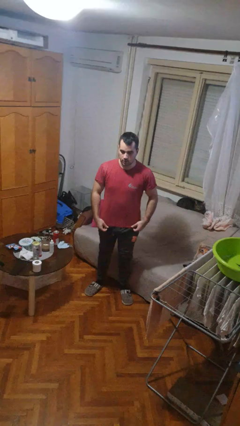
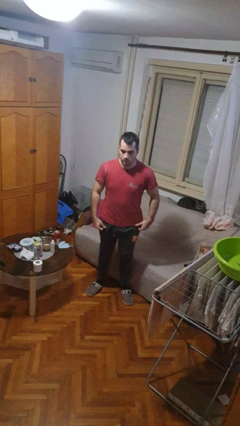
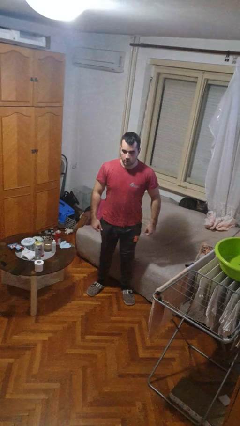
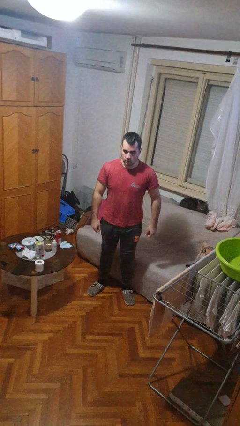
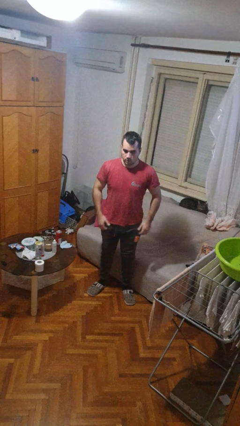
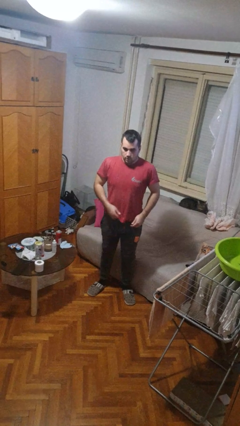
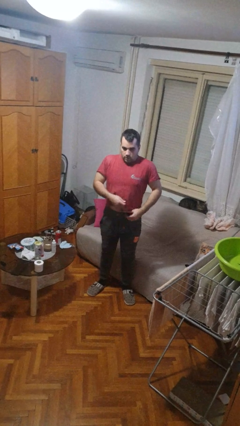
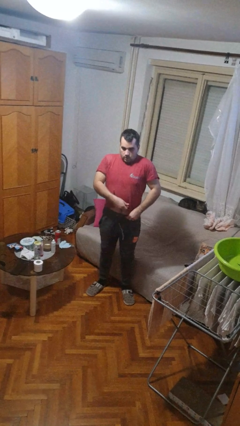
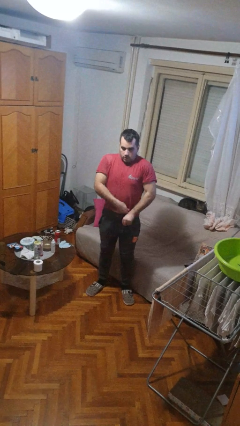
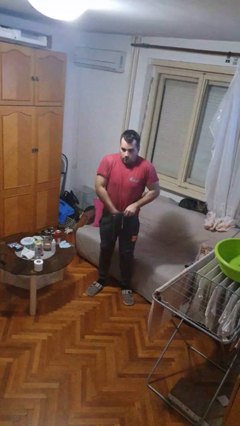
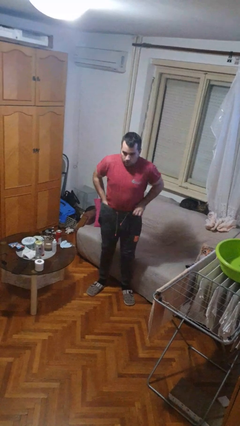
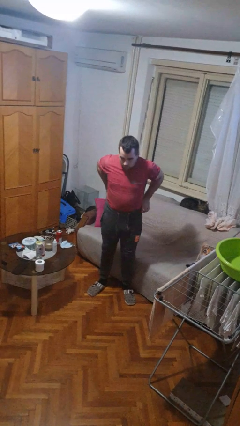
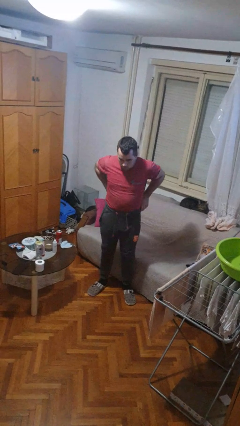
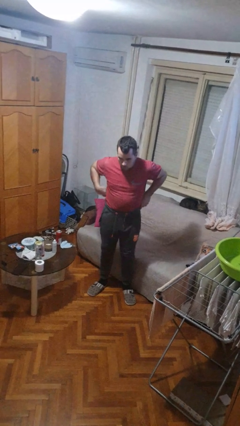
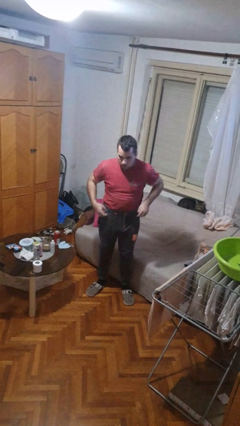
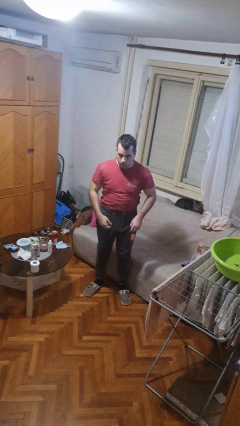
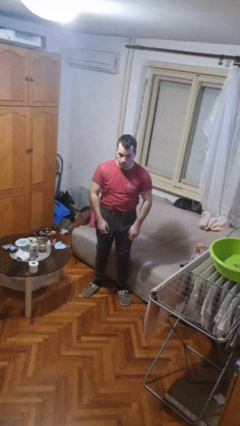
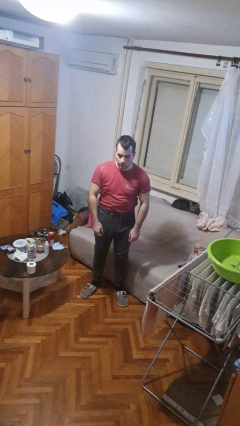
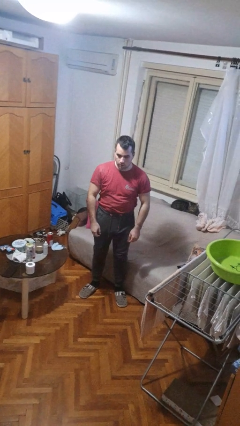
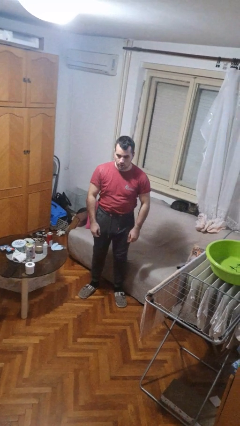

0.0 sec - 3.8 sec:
person tucks in shirt

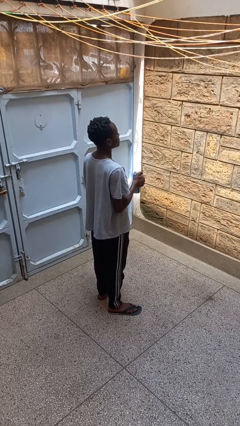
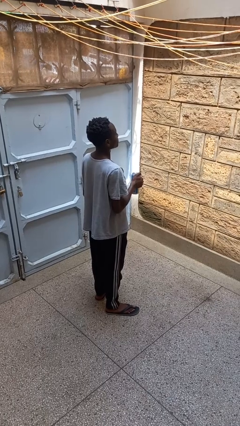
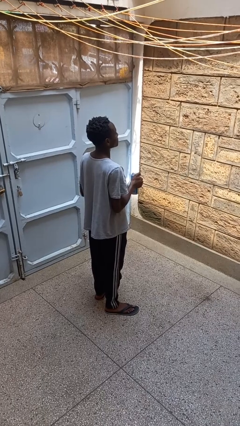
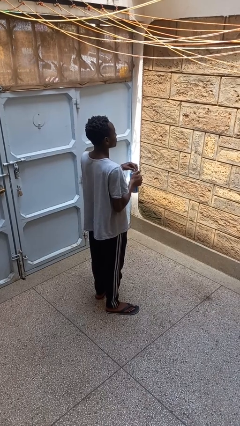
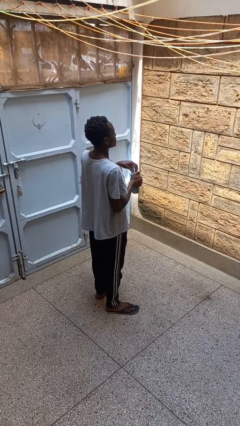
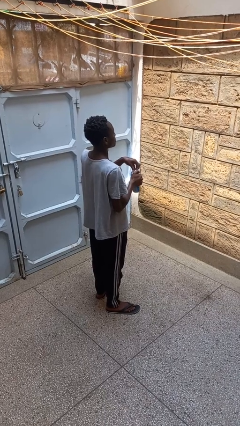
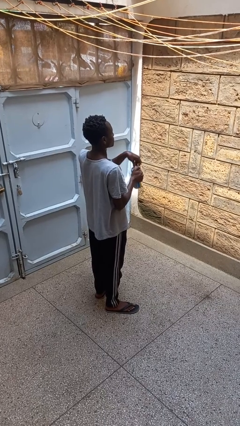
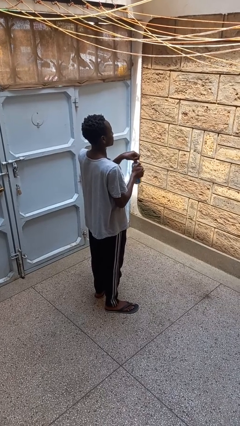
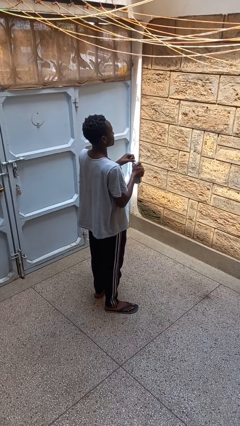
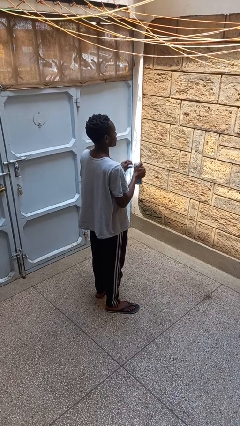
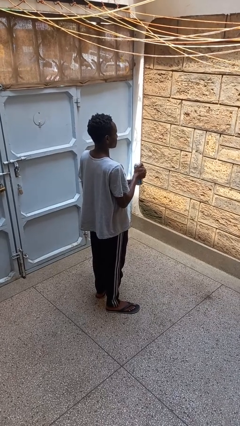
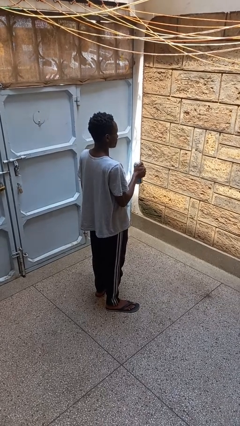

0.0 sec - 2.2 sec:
person opens beverage can

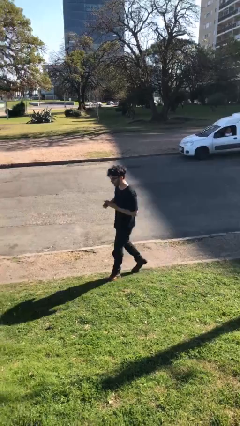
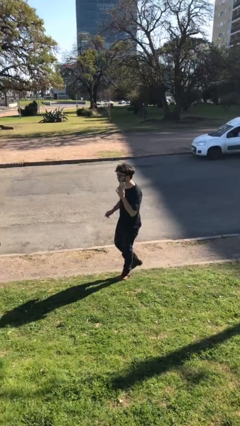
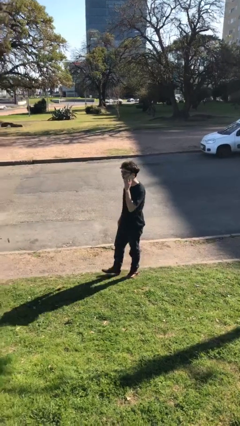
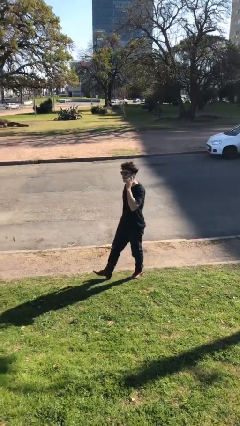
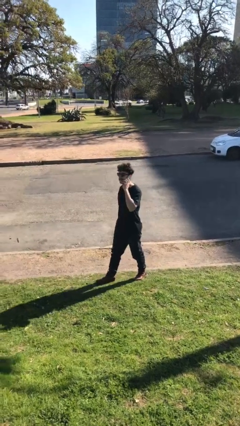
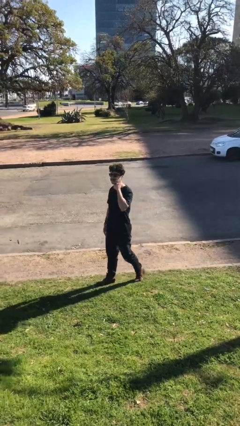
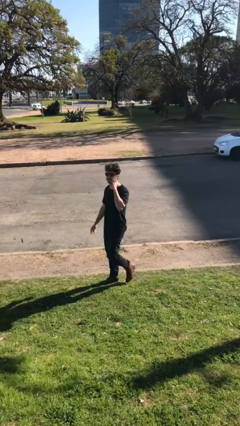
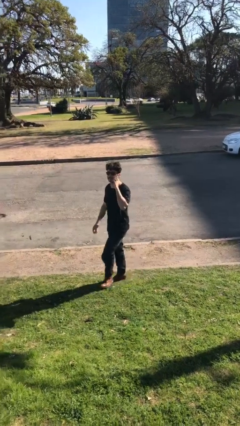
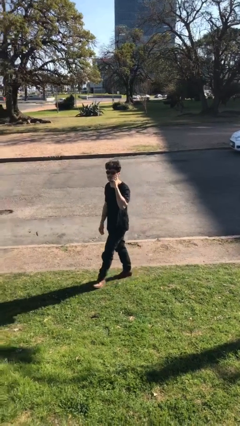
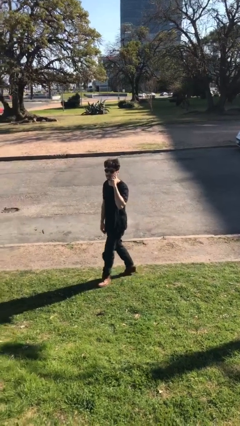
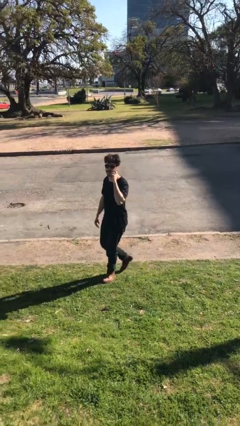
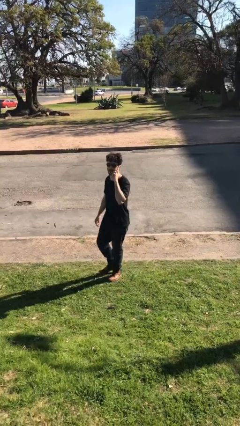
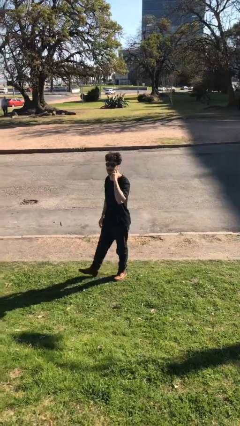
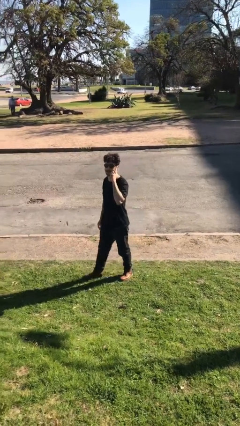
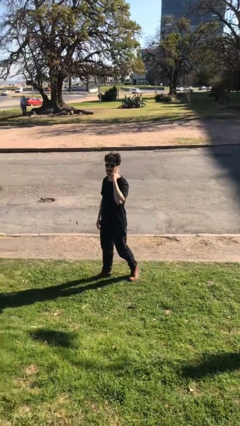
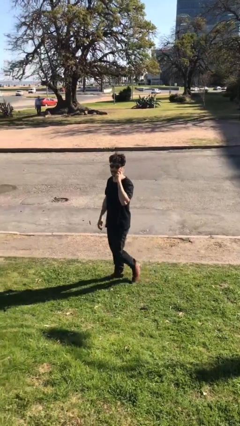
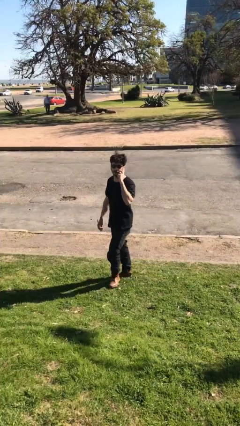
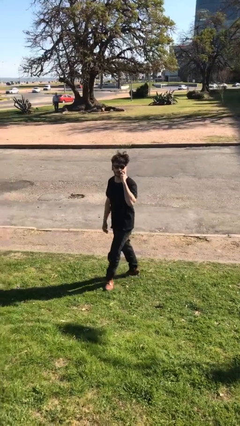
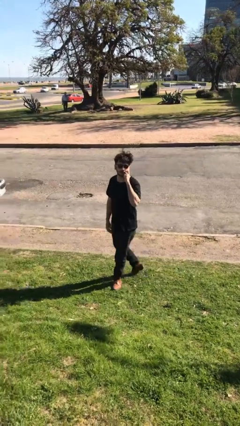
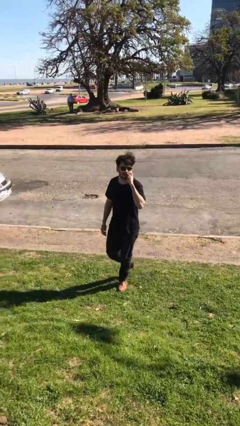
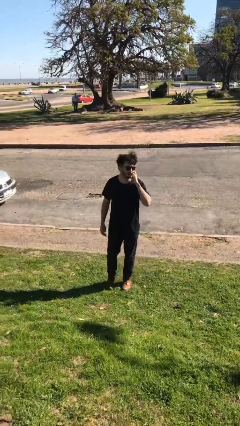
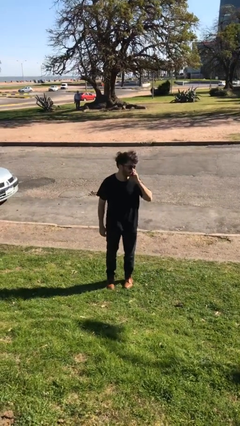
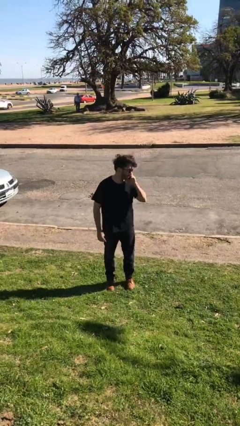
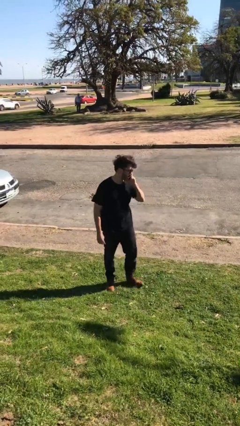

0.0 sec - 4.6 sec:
person talks on phone

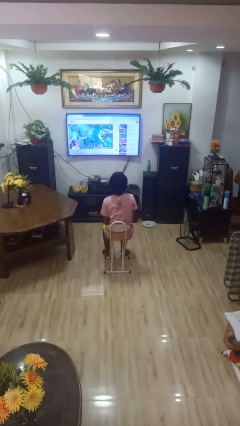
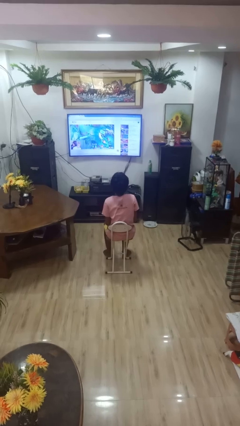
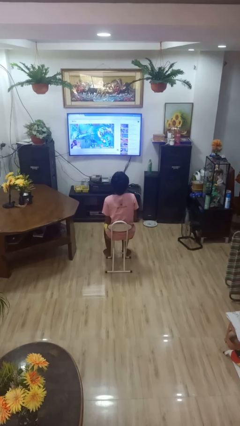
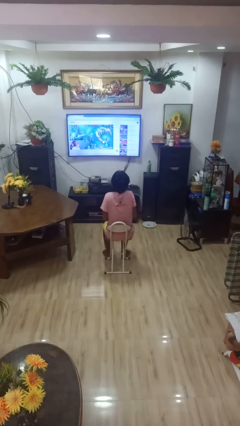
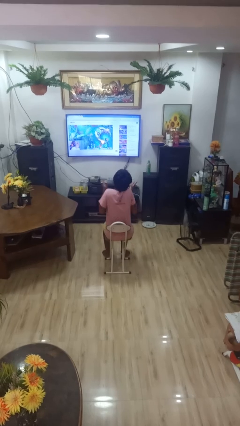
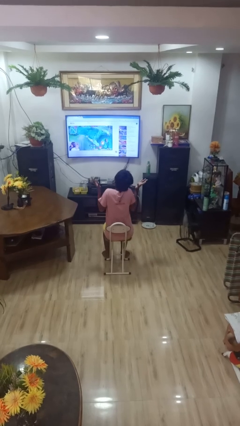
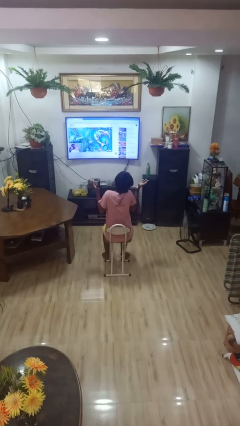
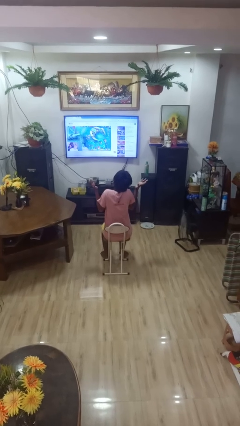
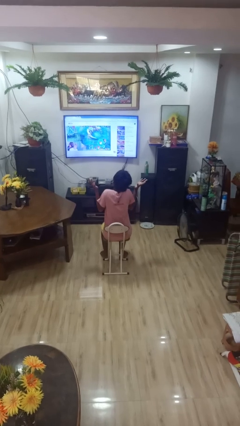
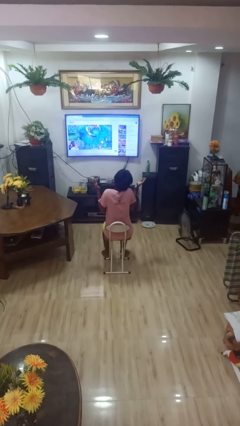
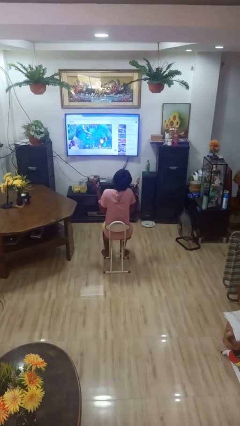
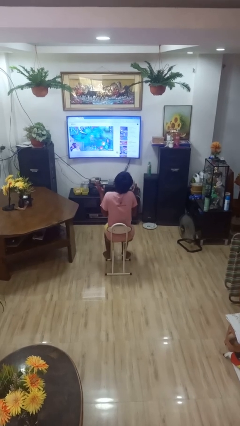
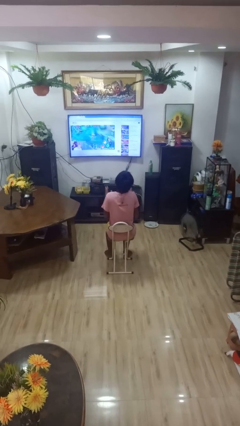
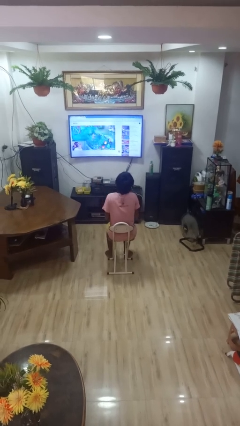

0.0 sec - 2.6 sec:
person shrugs

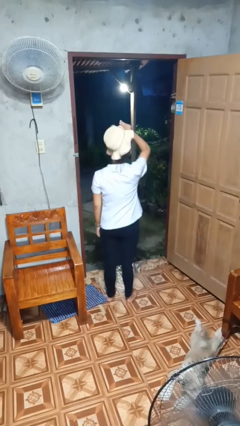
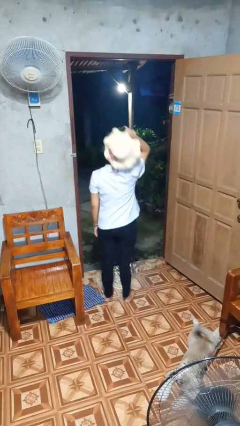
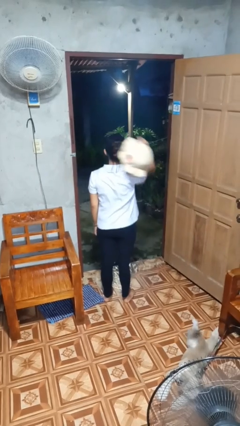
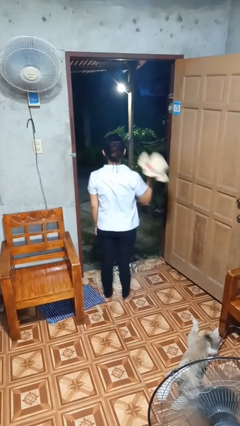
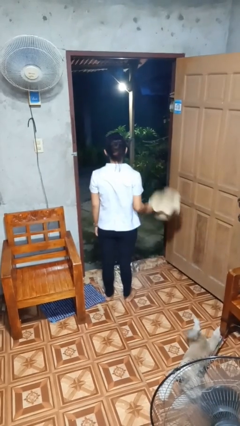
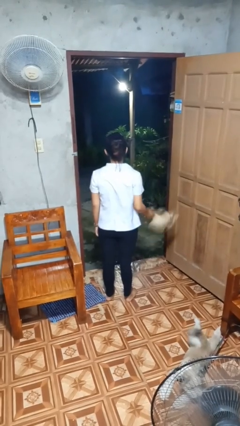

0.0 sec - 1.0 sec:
person takes off hat

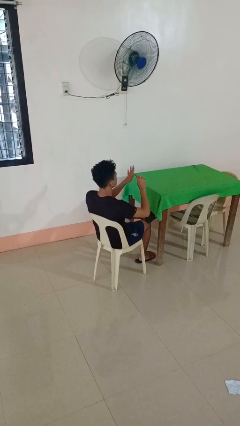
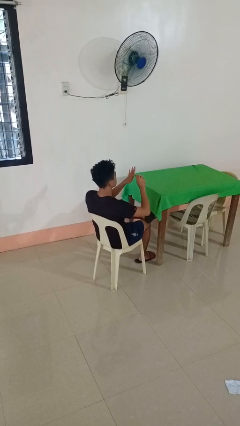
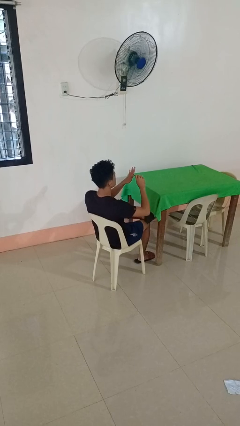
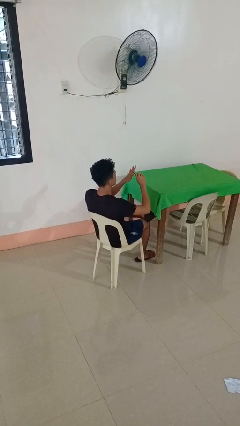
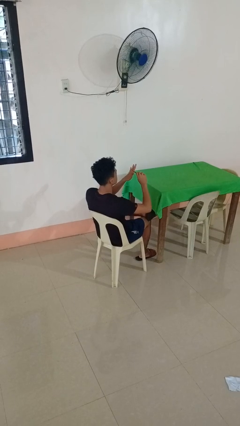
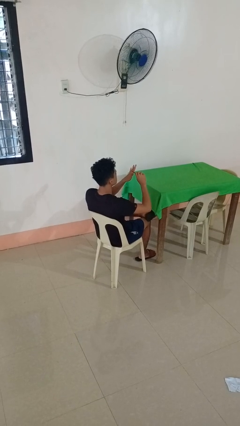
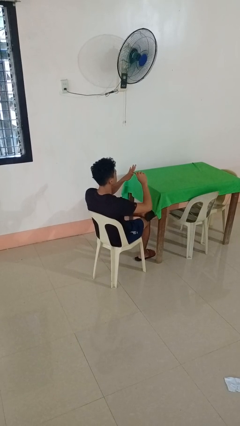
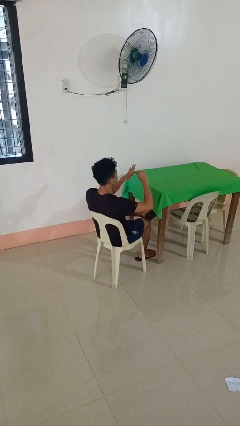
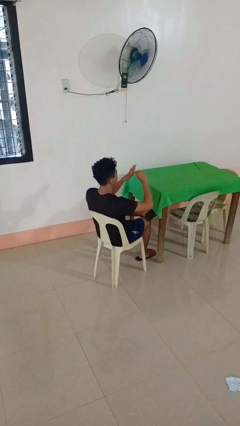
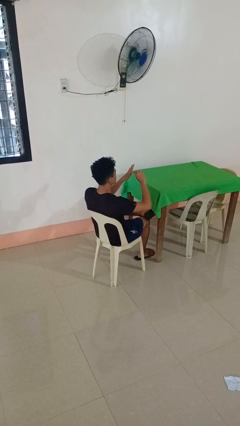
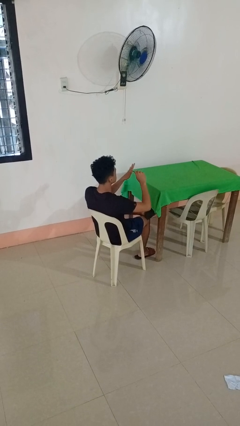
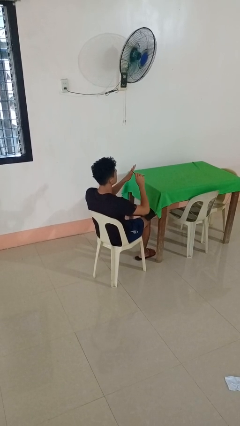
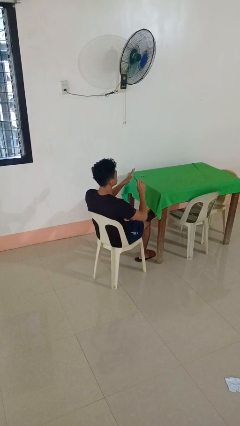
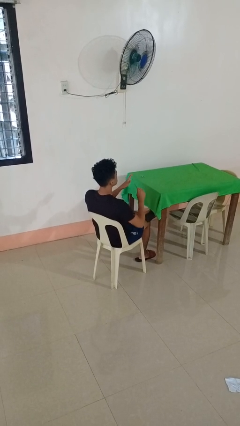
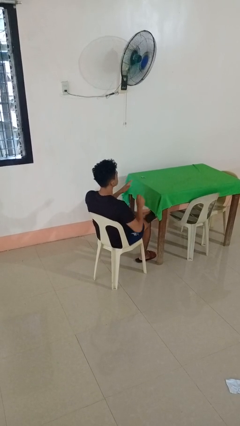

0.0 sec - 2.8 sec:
person files fingernails

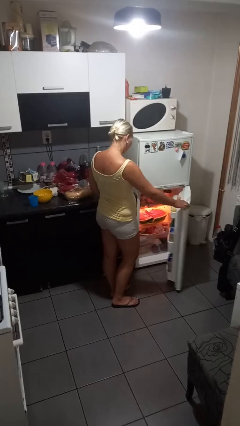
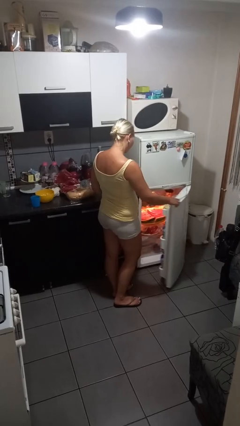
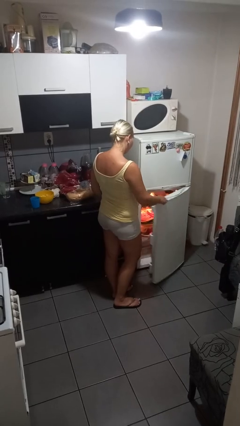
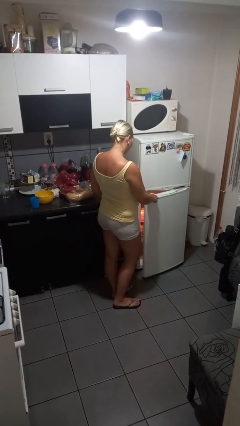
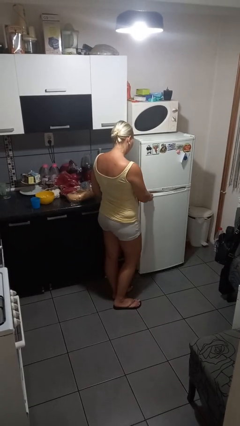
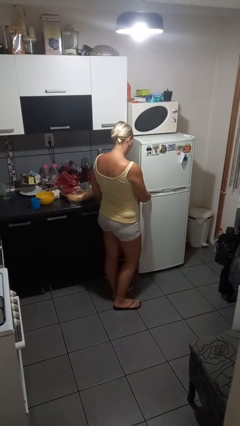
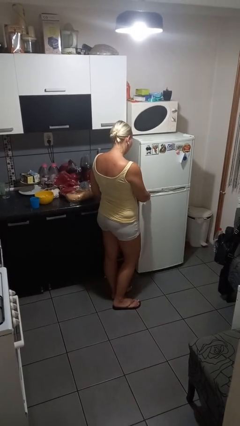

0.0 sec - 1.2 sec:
person closes refrigerator
